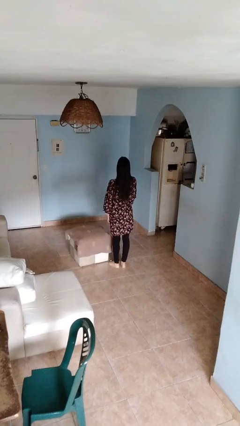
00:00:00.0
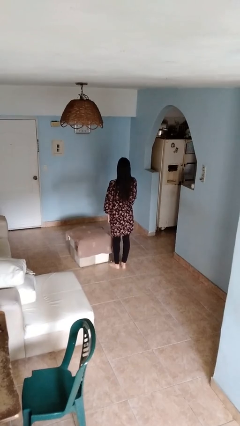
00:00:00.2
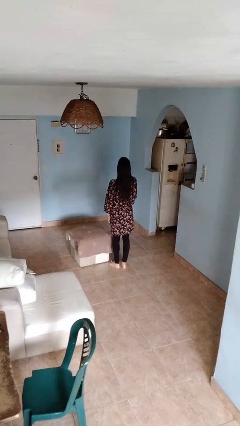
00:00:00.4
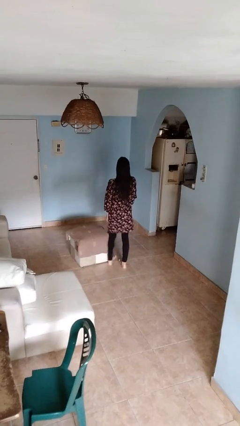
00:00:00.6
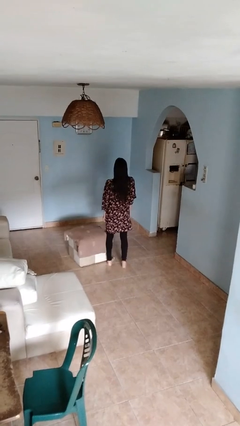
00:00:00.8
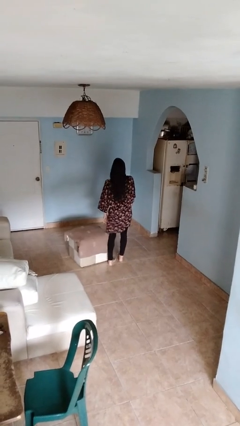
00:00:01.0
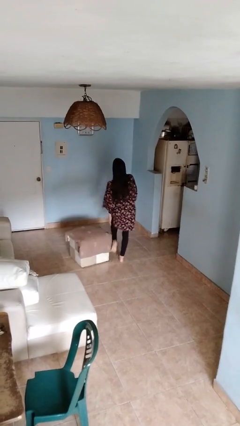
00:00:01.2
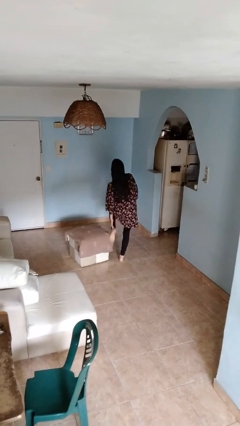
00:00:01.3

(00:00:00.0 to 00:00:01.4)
person stubs toe

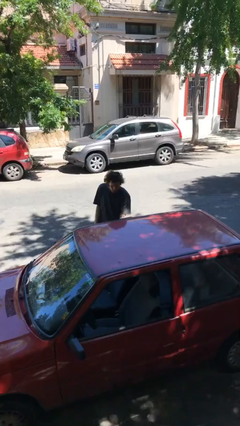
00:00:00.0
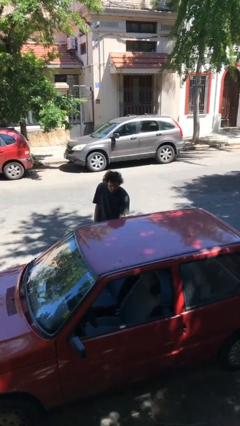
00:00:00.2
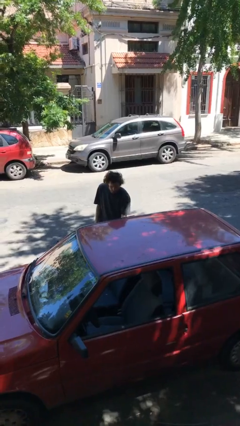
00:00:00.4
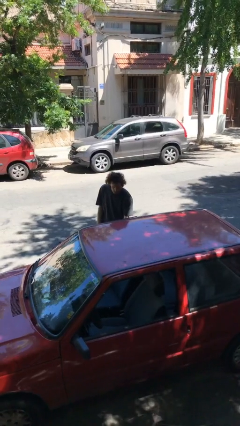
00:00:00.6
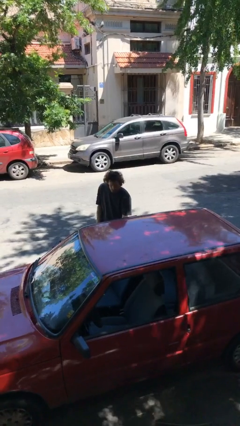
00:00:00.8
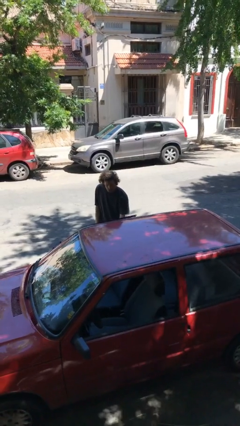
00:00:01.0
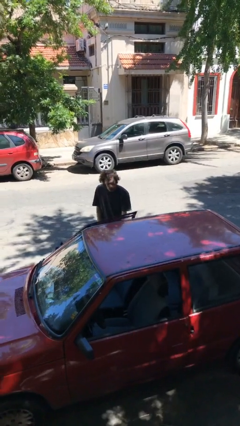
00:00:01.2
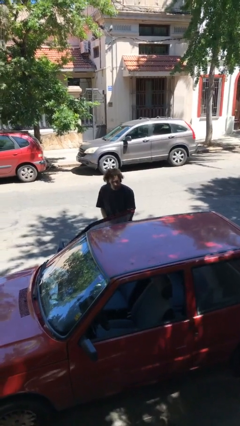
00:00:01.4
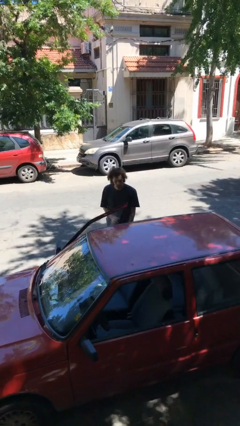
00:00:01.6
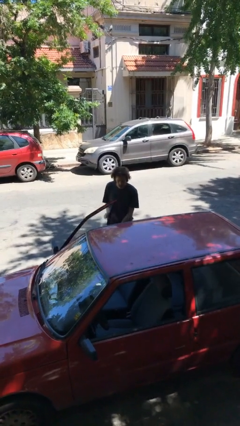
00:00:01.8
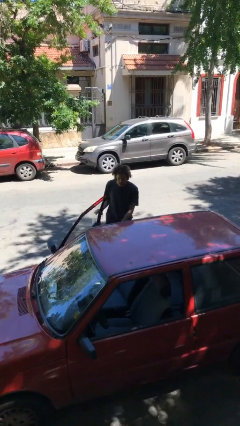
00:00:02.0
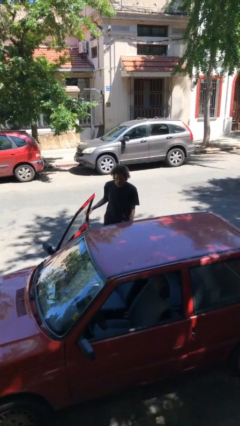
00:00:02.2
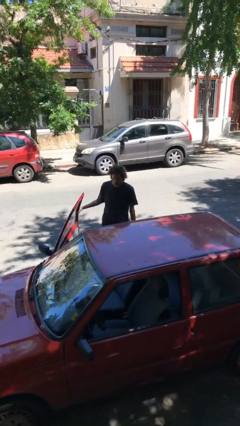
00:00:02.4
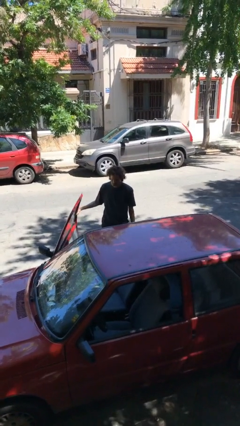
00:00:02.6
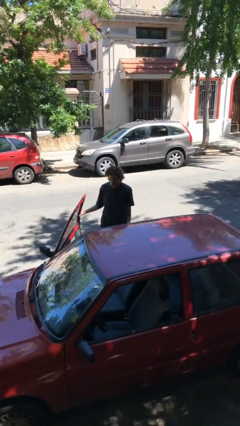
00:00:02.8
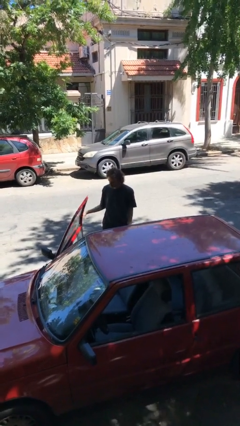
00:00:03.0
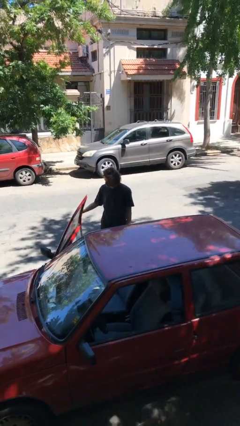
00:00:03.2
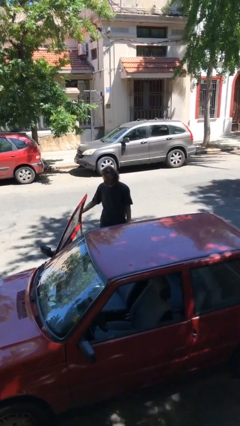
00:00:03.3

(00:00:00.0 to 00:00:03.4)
person opens car door

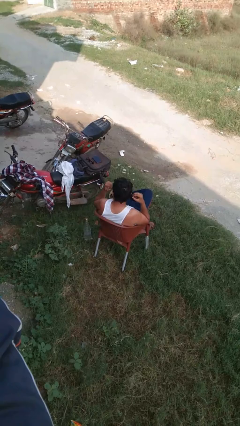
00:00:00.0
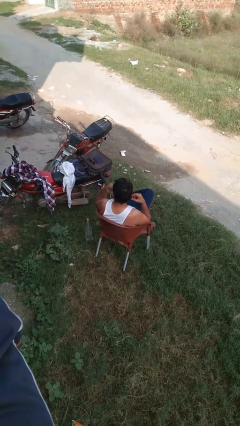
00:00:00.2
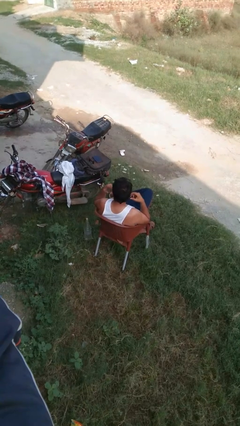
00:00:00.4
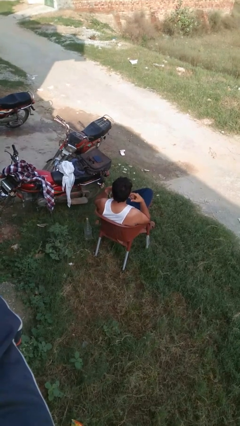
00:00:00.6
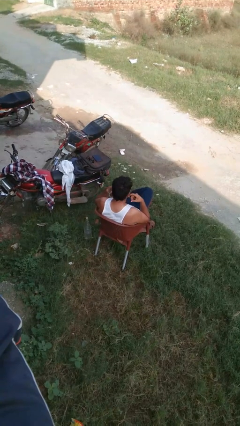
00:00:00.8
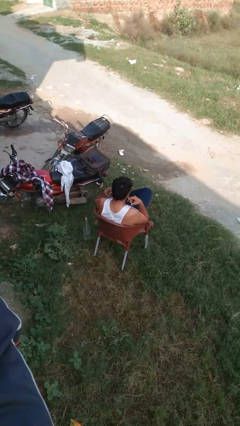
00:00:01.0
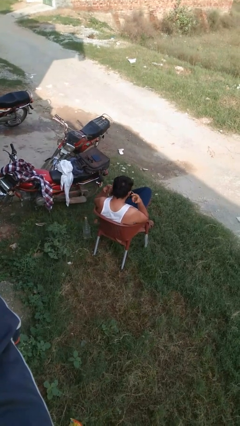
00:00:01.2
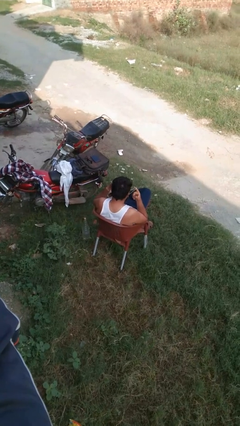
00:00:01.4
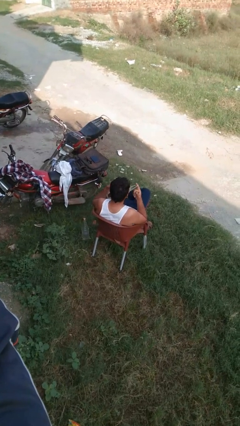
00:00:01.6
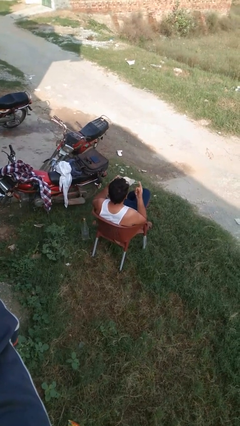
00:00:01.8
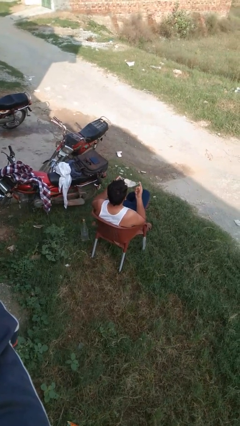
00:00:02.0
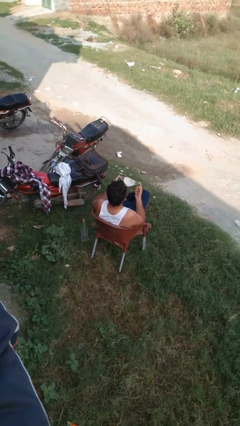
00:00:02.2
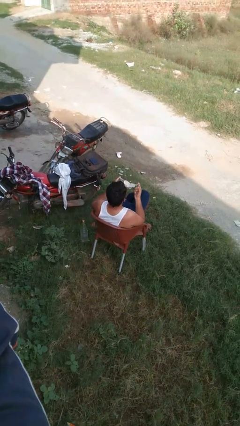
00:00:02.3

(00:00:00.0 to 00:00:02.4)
person takes off facemask

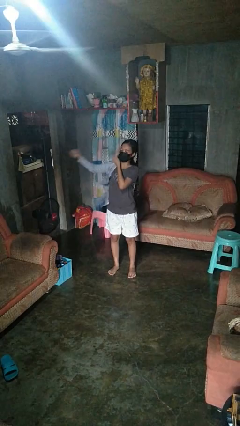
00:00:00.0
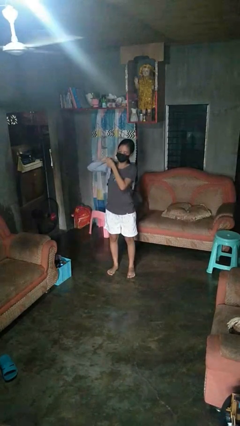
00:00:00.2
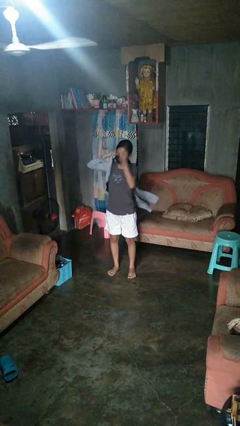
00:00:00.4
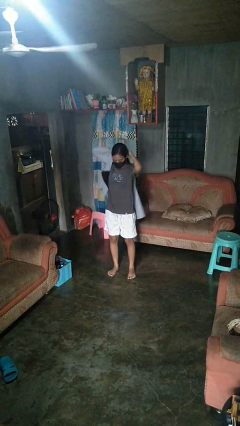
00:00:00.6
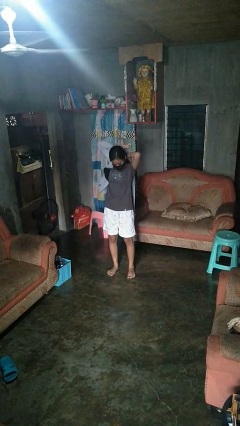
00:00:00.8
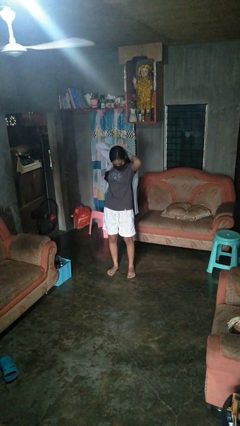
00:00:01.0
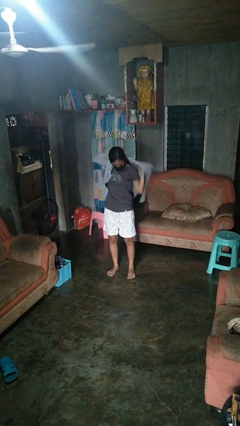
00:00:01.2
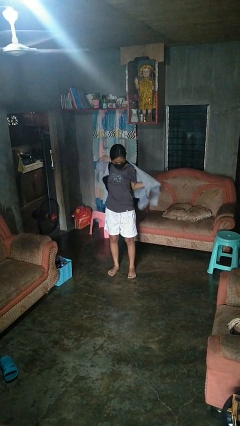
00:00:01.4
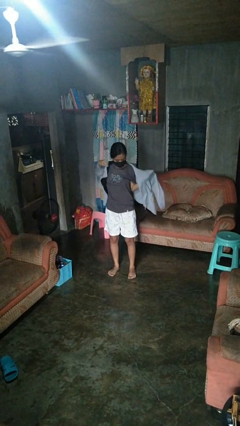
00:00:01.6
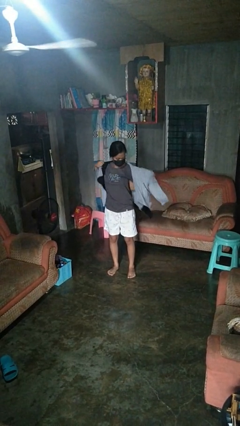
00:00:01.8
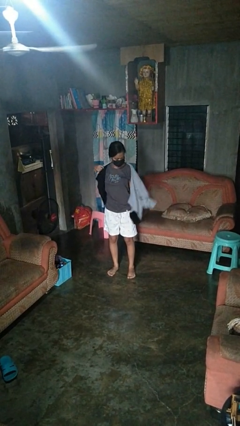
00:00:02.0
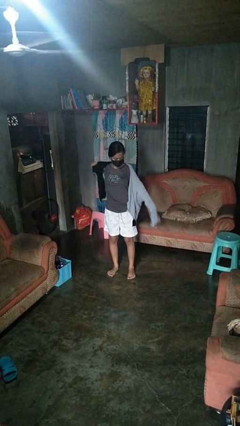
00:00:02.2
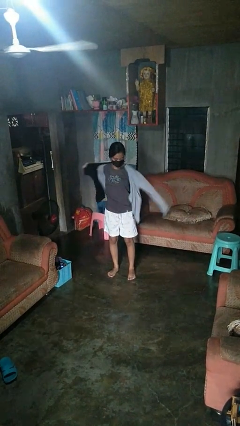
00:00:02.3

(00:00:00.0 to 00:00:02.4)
person puts on jacket

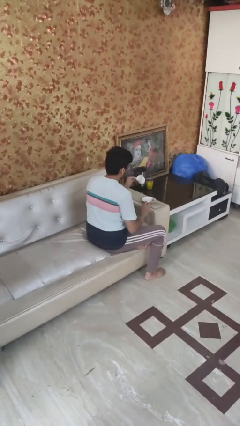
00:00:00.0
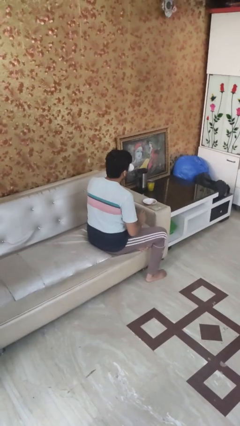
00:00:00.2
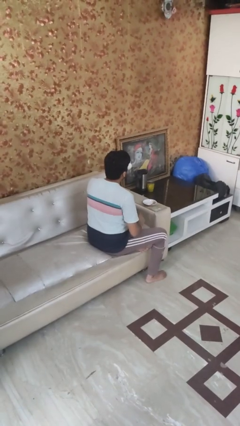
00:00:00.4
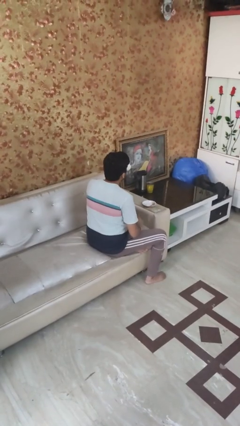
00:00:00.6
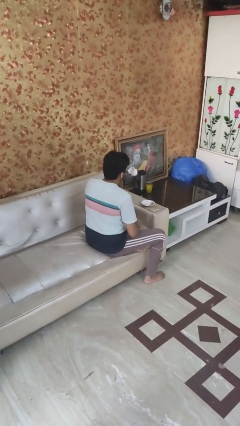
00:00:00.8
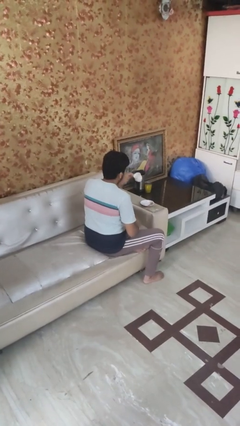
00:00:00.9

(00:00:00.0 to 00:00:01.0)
person drinks from mug

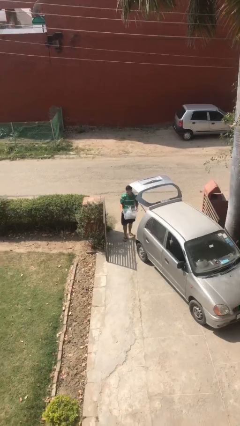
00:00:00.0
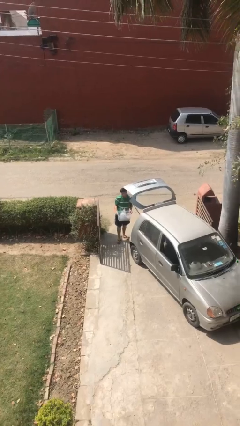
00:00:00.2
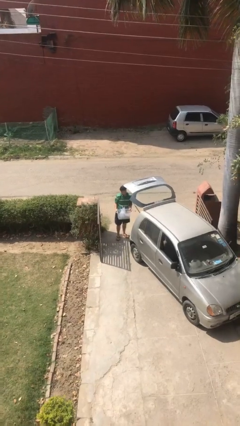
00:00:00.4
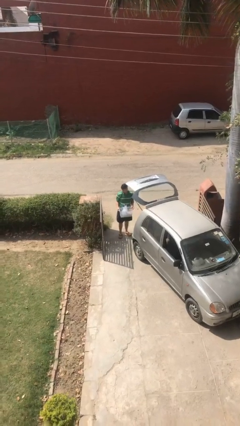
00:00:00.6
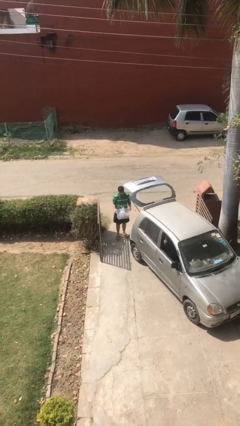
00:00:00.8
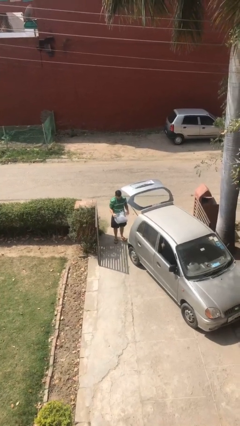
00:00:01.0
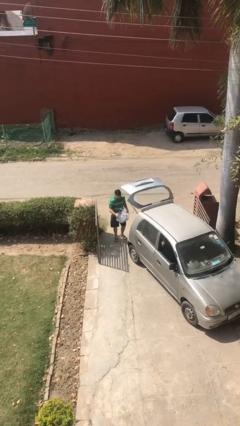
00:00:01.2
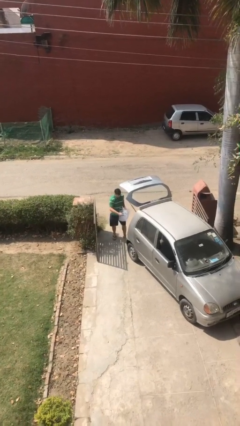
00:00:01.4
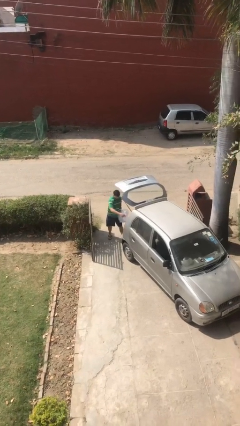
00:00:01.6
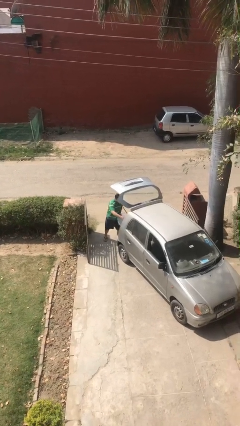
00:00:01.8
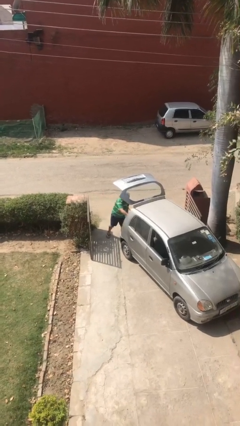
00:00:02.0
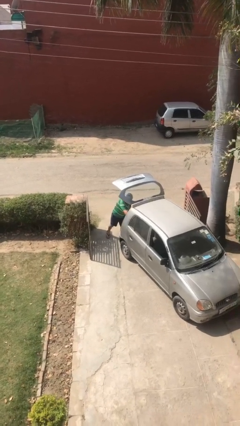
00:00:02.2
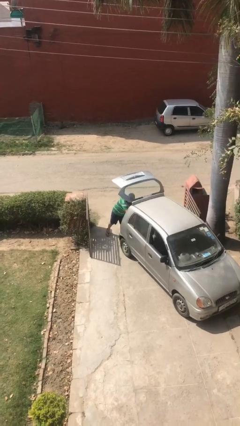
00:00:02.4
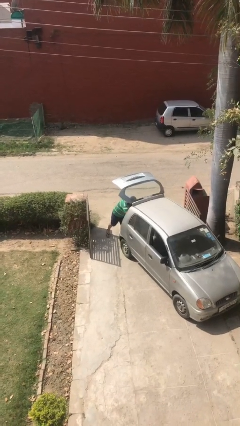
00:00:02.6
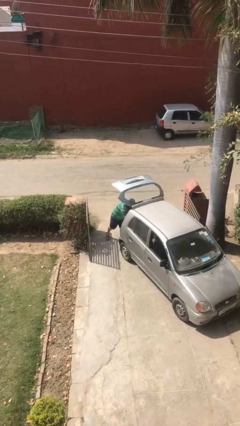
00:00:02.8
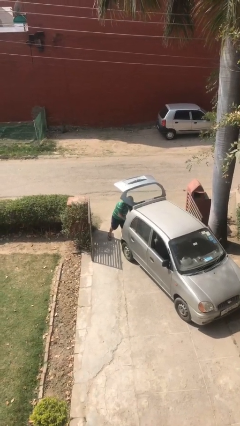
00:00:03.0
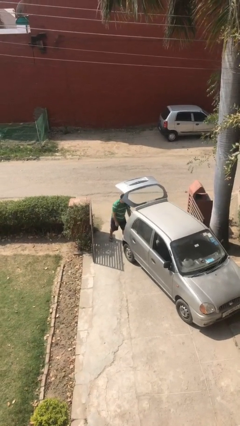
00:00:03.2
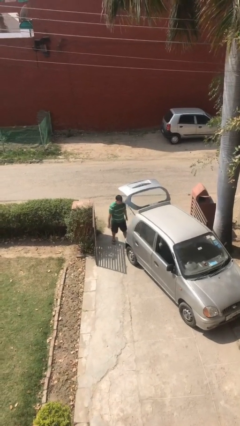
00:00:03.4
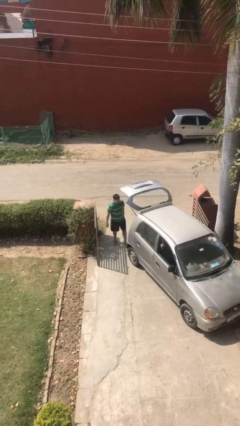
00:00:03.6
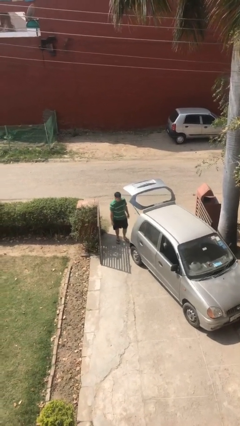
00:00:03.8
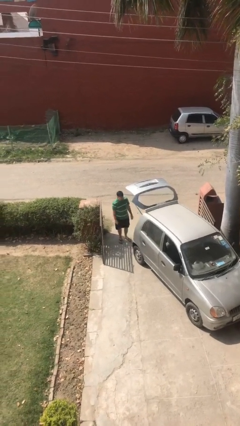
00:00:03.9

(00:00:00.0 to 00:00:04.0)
person loads car

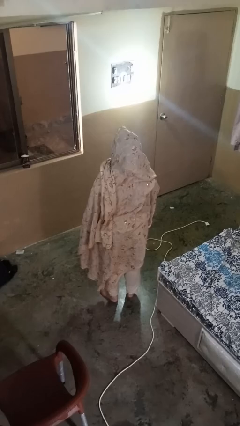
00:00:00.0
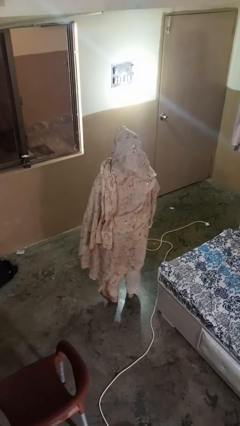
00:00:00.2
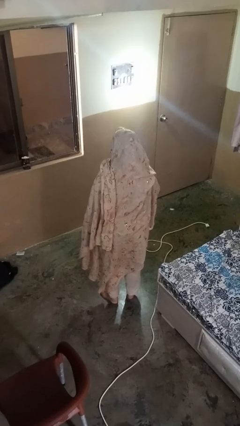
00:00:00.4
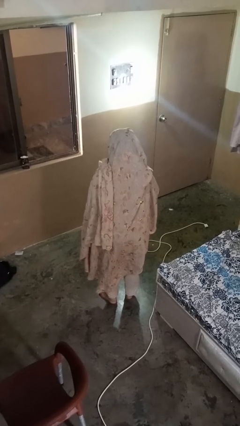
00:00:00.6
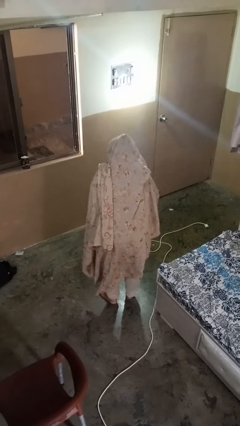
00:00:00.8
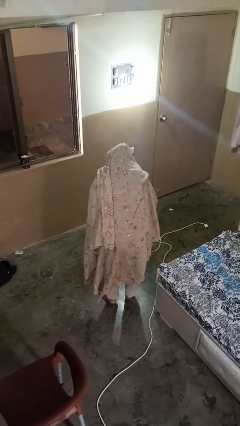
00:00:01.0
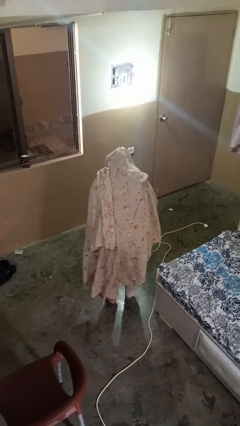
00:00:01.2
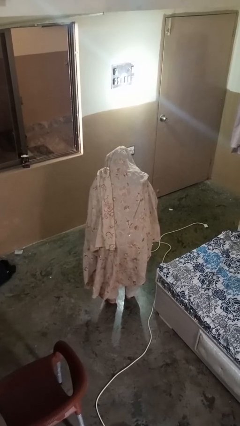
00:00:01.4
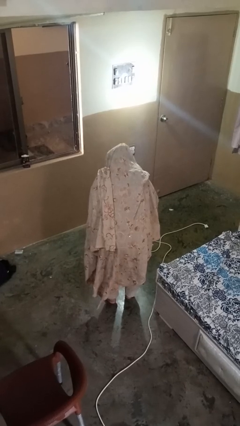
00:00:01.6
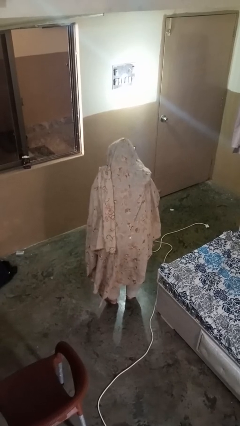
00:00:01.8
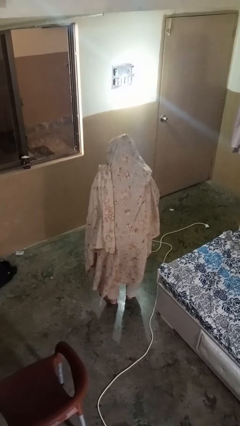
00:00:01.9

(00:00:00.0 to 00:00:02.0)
person bows

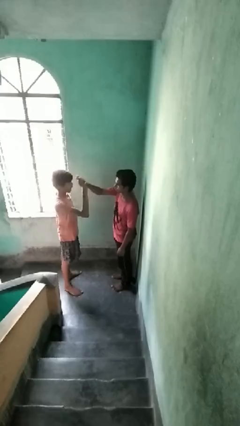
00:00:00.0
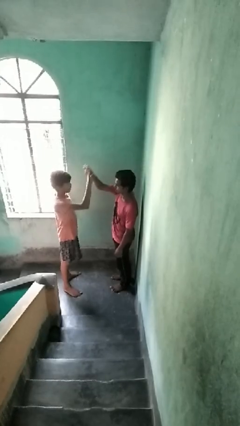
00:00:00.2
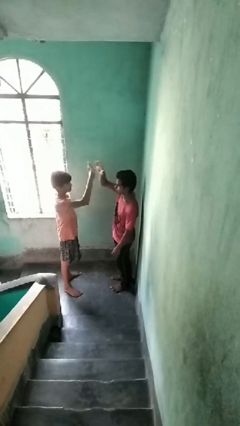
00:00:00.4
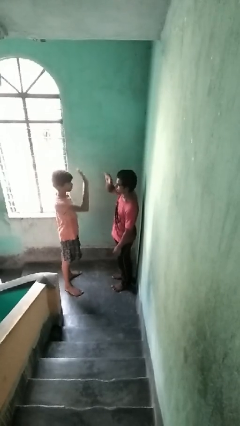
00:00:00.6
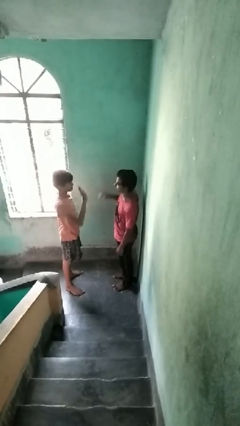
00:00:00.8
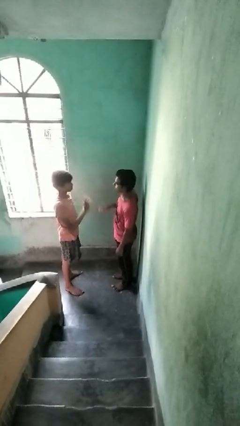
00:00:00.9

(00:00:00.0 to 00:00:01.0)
person highfives hand
